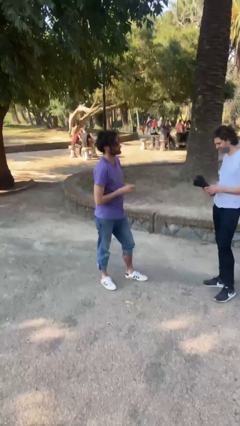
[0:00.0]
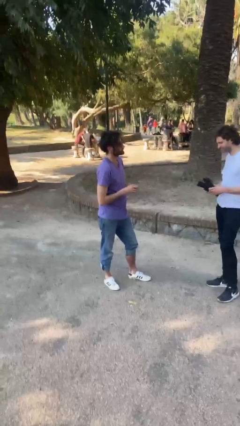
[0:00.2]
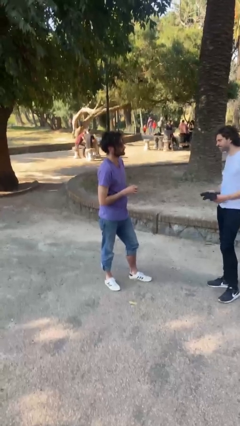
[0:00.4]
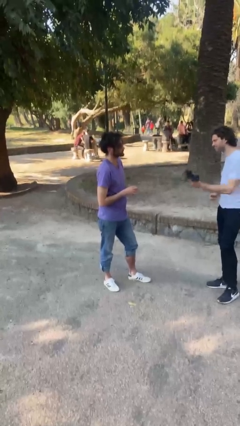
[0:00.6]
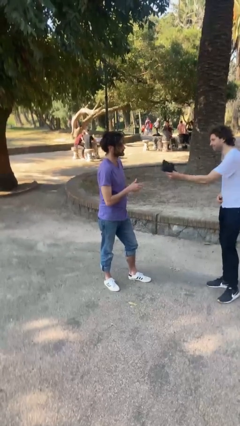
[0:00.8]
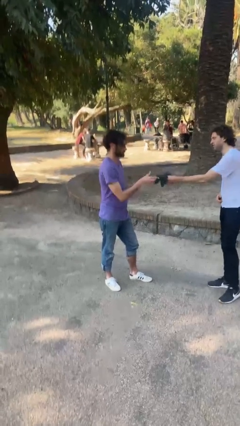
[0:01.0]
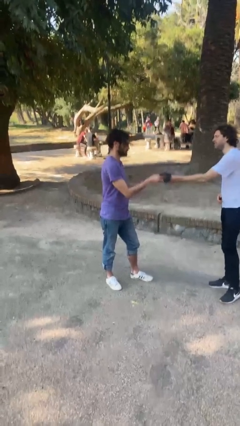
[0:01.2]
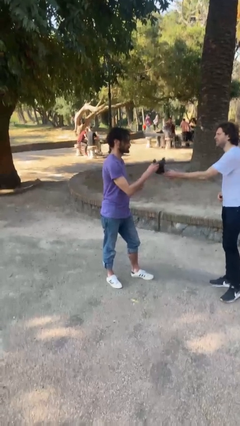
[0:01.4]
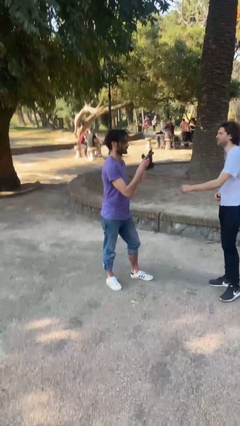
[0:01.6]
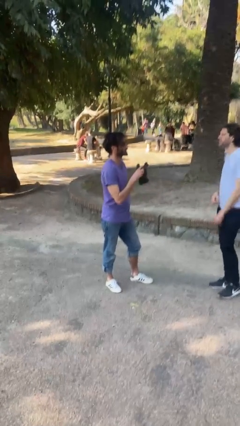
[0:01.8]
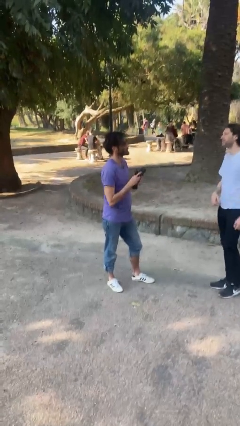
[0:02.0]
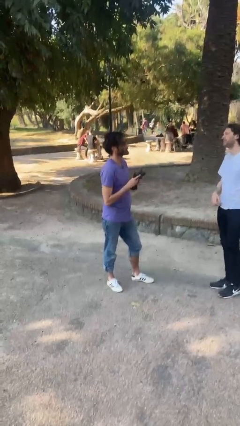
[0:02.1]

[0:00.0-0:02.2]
person transfers object to person

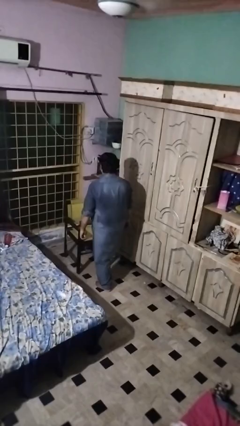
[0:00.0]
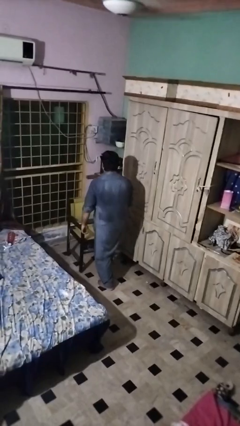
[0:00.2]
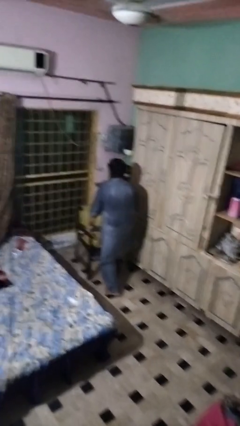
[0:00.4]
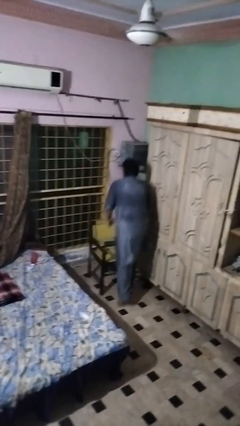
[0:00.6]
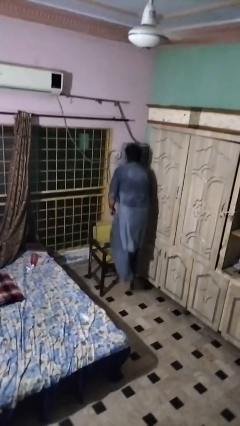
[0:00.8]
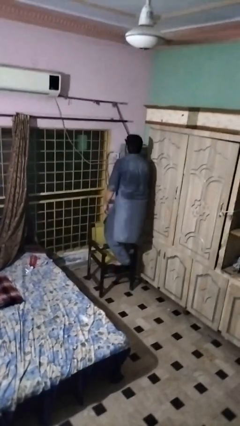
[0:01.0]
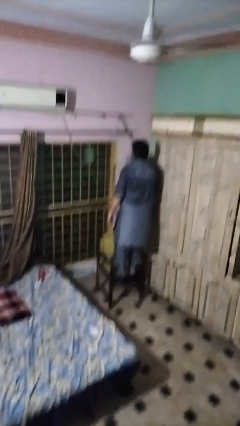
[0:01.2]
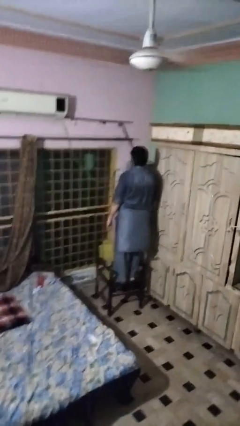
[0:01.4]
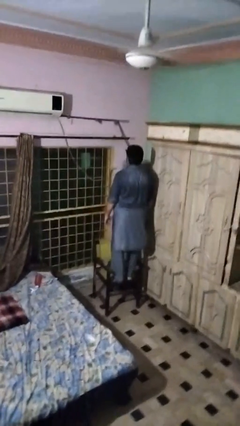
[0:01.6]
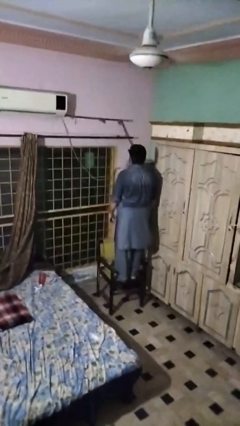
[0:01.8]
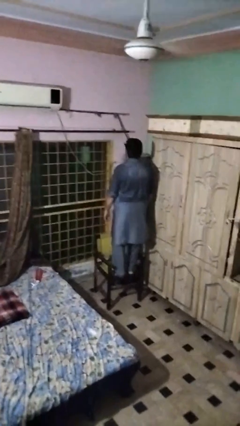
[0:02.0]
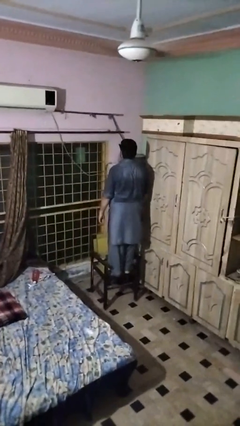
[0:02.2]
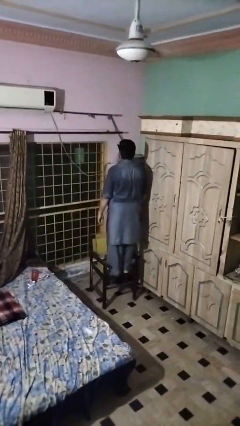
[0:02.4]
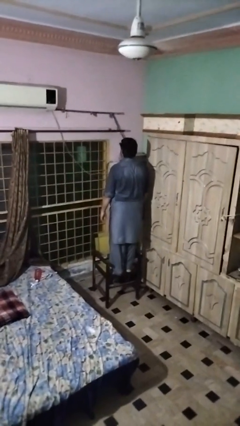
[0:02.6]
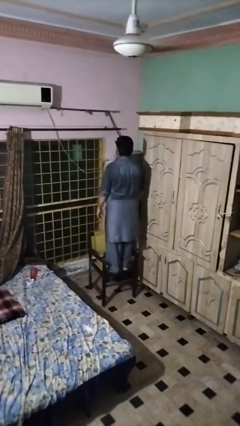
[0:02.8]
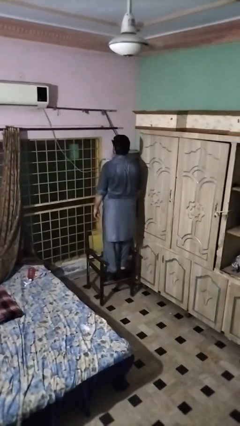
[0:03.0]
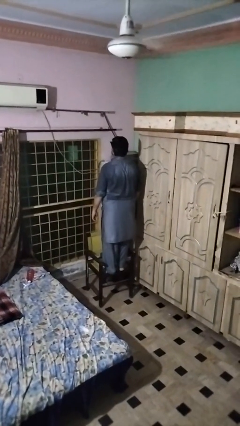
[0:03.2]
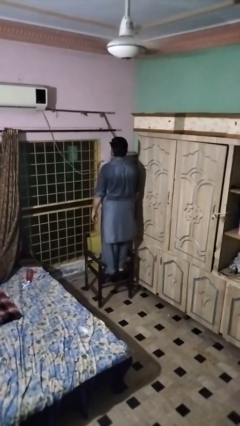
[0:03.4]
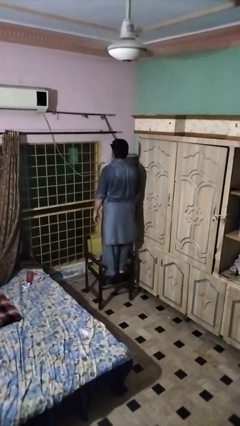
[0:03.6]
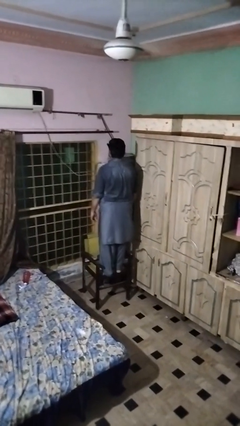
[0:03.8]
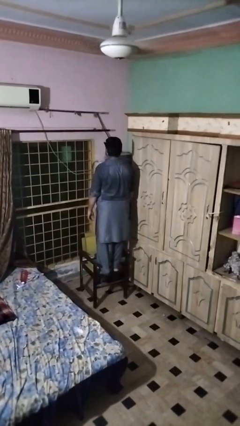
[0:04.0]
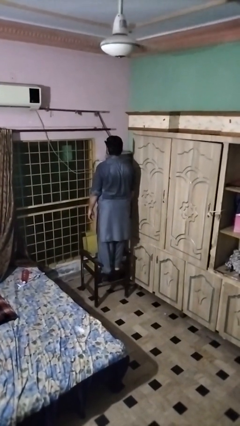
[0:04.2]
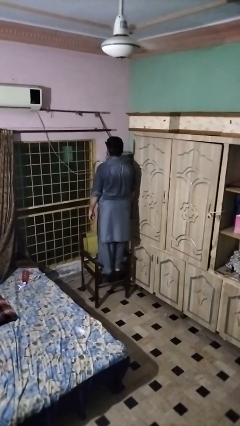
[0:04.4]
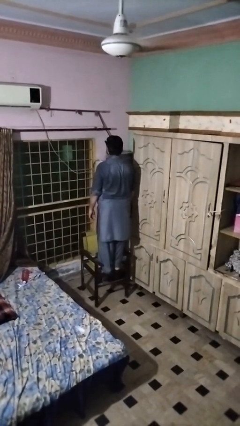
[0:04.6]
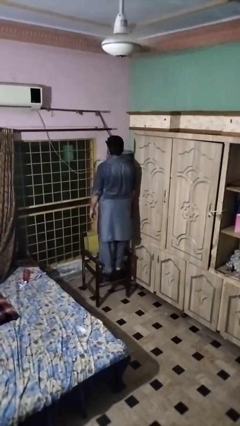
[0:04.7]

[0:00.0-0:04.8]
person climbs on chair

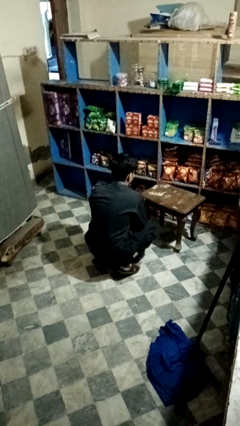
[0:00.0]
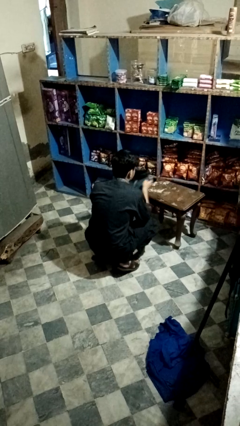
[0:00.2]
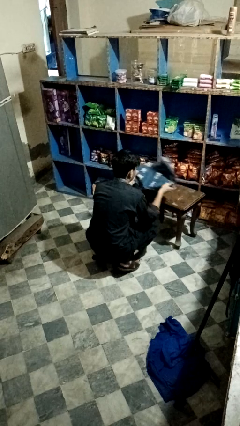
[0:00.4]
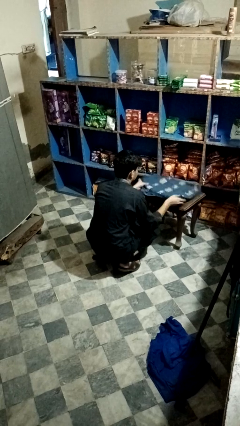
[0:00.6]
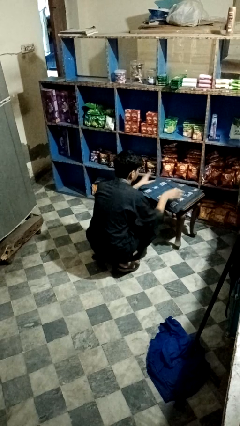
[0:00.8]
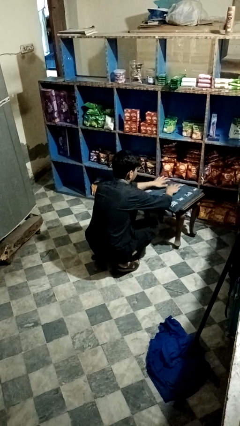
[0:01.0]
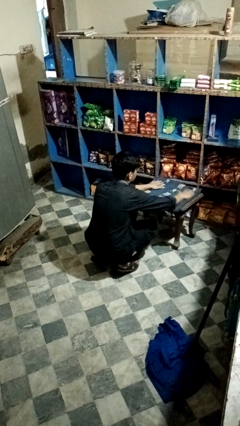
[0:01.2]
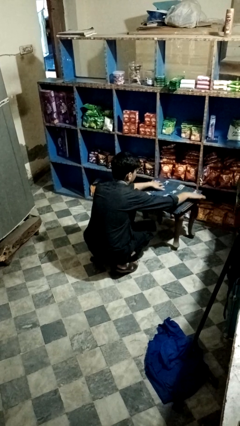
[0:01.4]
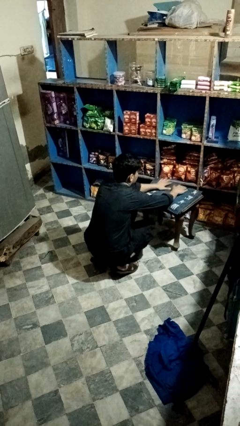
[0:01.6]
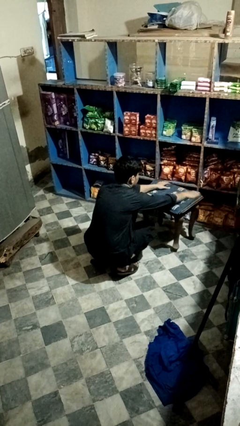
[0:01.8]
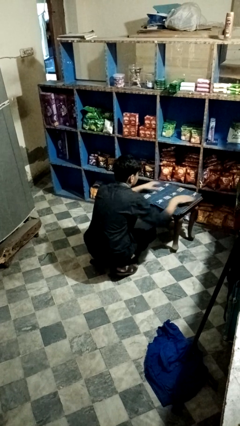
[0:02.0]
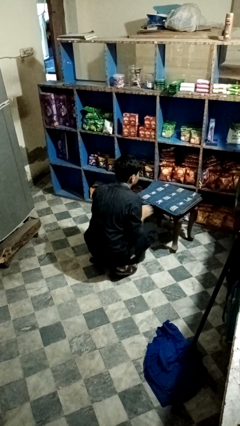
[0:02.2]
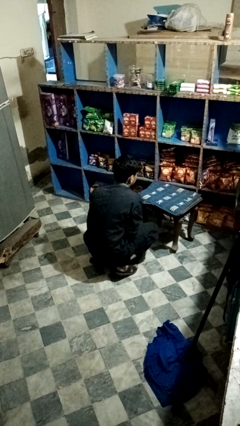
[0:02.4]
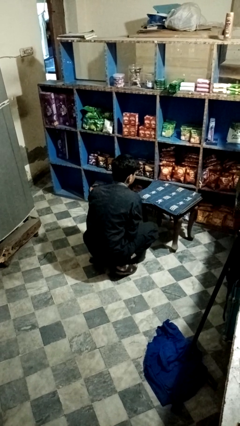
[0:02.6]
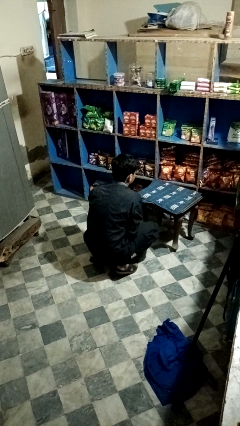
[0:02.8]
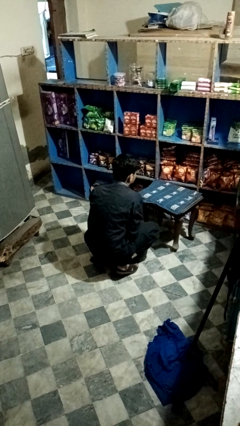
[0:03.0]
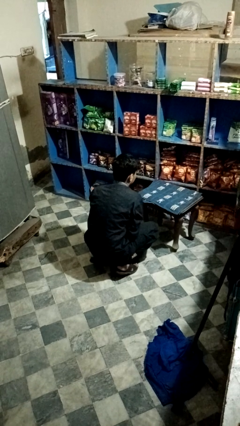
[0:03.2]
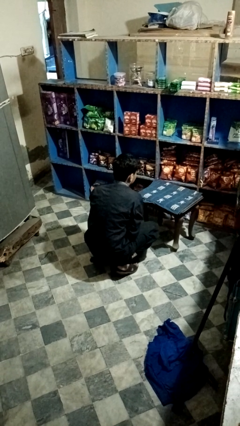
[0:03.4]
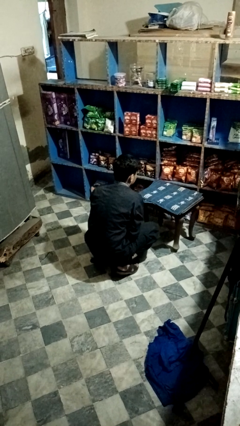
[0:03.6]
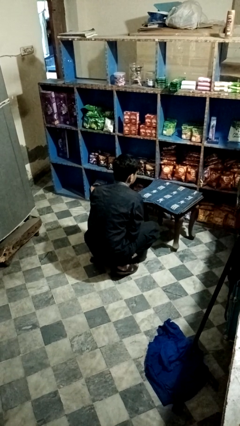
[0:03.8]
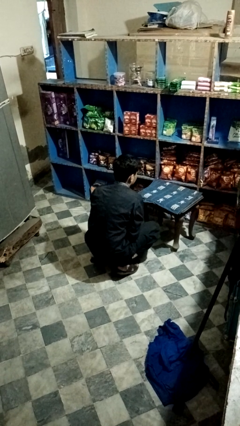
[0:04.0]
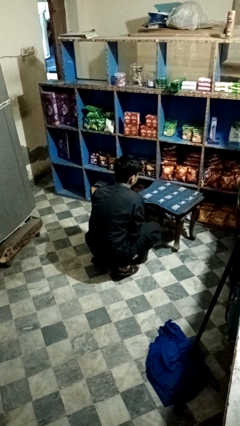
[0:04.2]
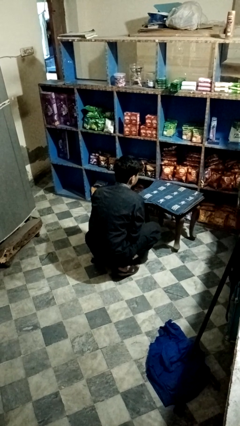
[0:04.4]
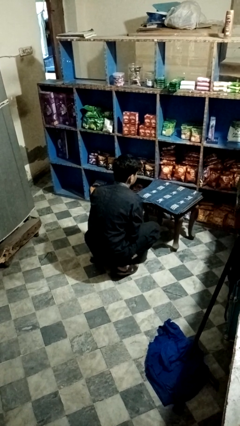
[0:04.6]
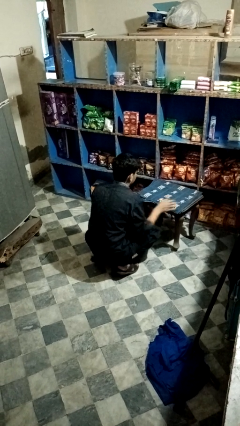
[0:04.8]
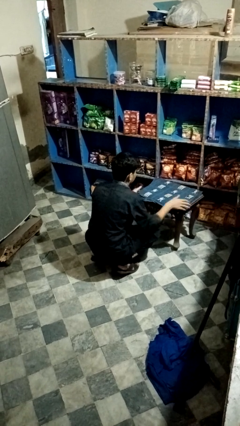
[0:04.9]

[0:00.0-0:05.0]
person spreads tablecloth

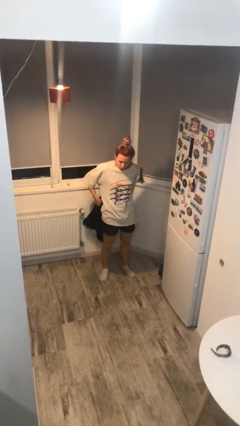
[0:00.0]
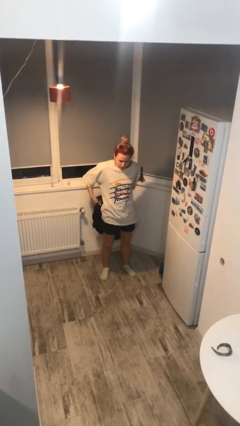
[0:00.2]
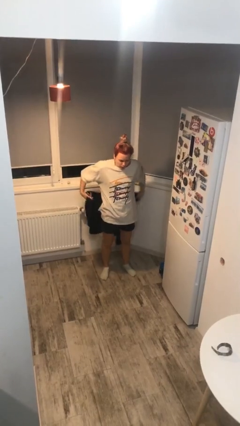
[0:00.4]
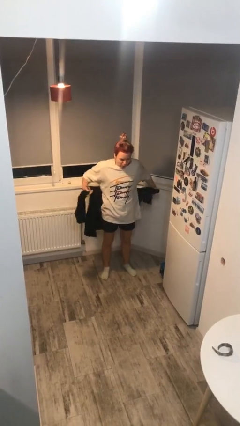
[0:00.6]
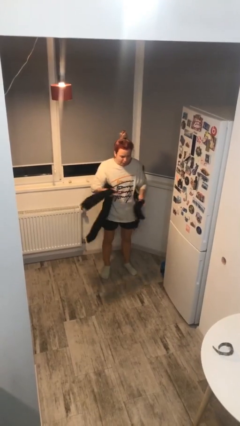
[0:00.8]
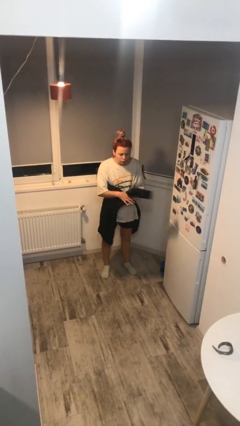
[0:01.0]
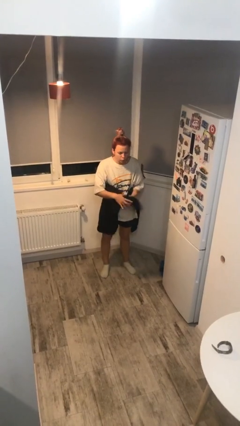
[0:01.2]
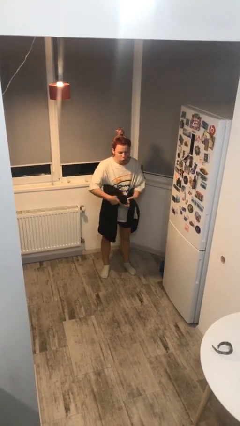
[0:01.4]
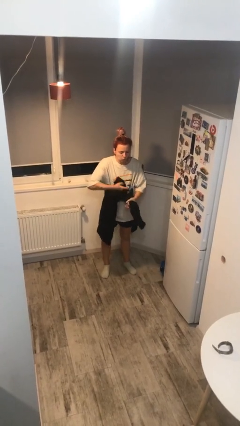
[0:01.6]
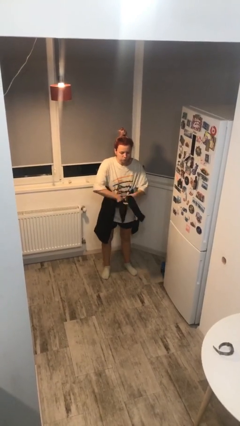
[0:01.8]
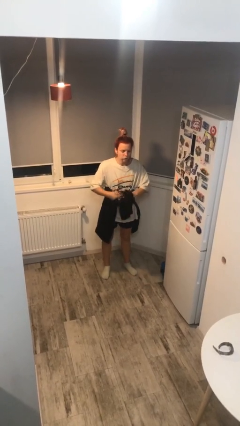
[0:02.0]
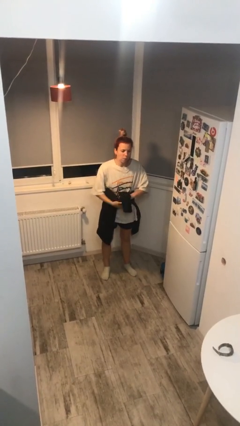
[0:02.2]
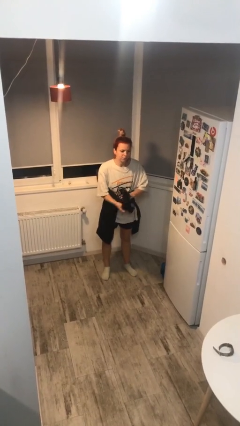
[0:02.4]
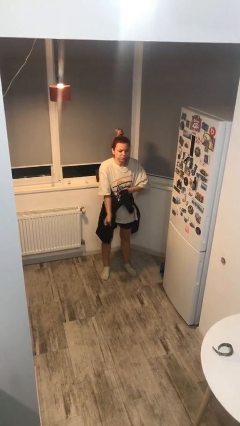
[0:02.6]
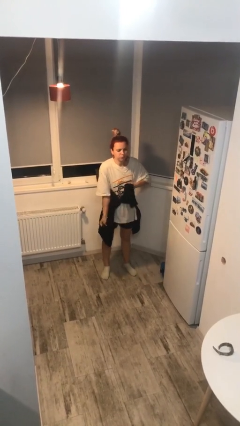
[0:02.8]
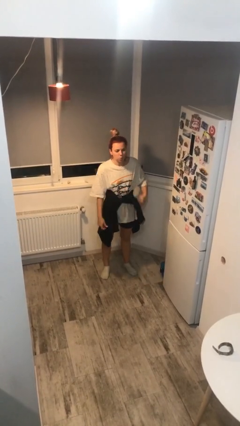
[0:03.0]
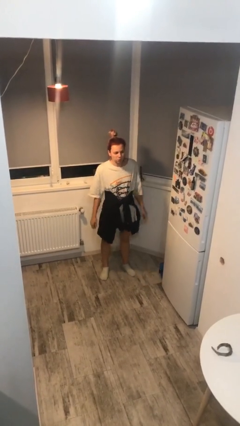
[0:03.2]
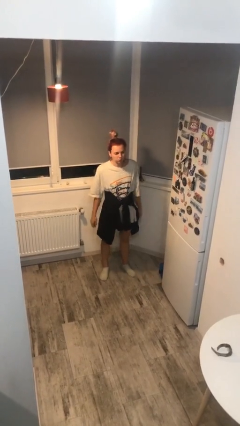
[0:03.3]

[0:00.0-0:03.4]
person ties jacket around waist

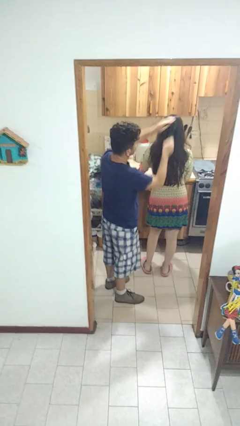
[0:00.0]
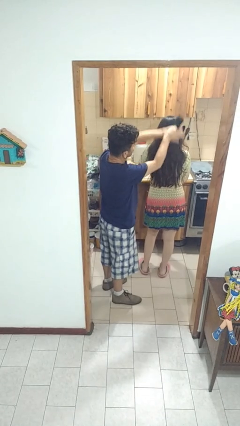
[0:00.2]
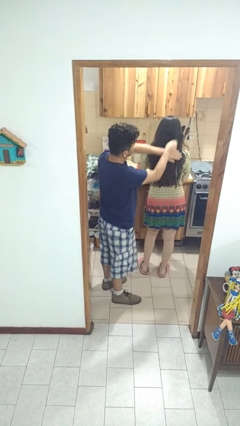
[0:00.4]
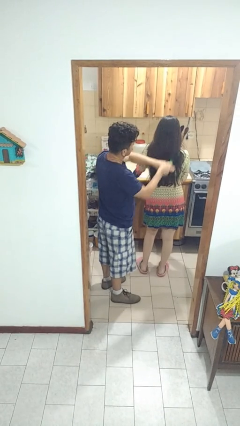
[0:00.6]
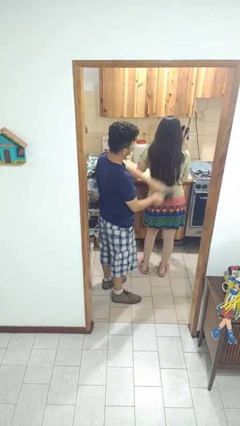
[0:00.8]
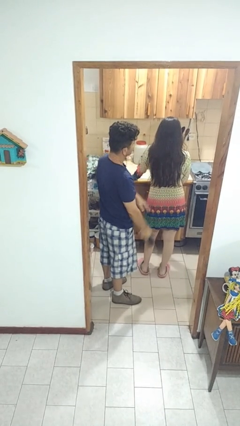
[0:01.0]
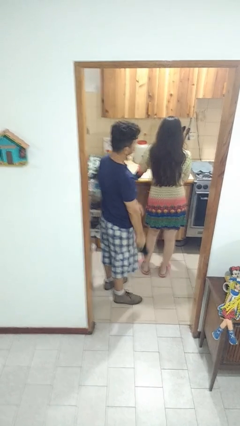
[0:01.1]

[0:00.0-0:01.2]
person brushes hair of person

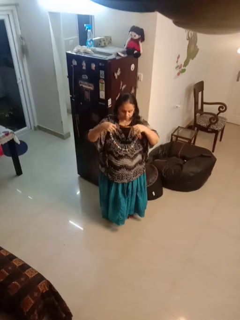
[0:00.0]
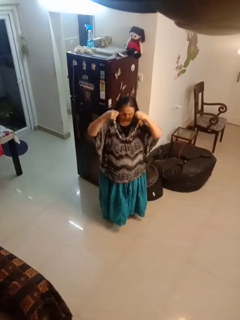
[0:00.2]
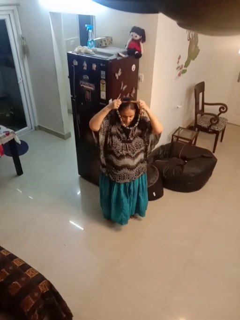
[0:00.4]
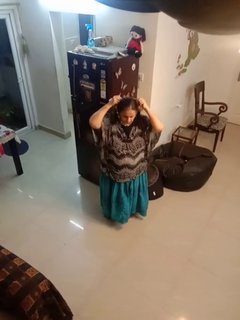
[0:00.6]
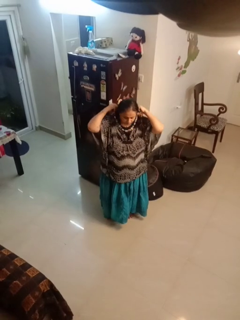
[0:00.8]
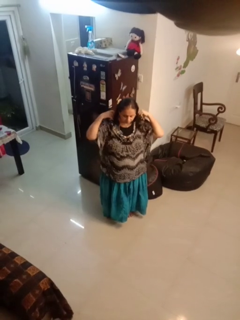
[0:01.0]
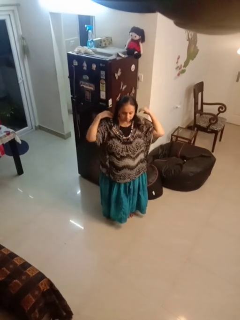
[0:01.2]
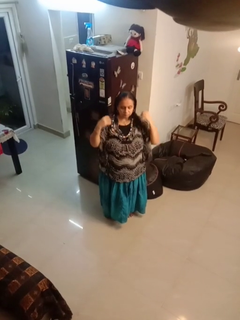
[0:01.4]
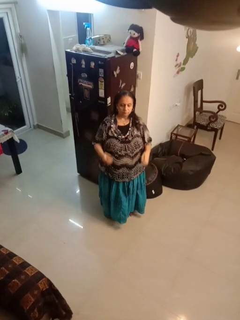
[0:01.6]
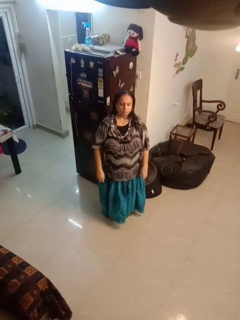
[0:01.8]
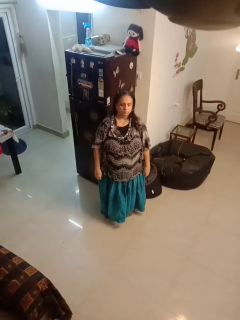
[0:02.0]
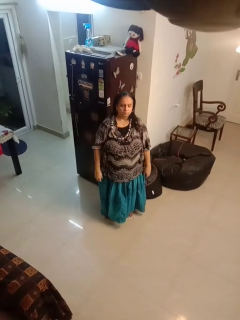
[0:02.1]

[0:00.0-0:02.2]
person puts on necklace
